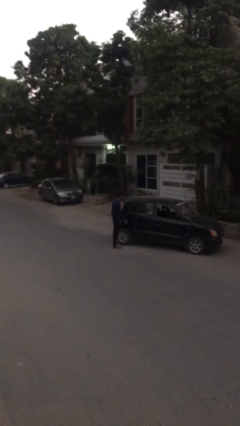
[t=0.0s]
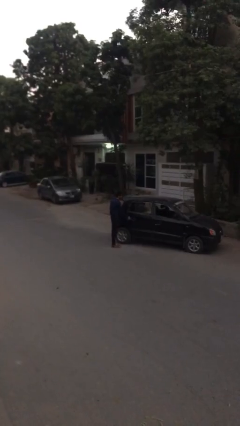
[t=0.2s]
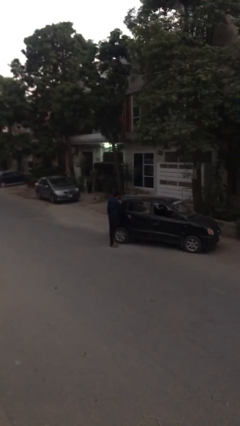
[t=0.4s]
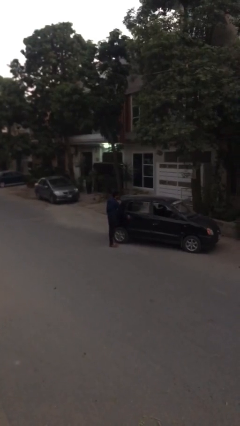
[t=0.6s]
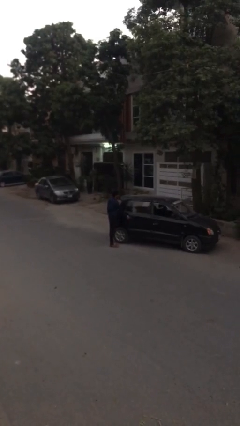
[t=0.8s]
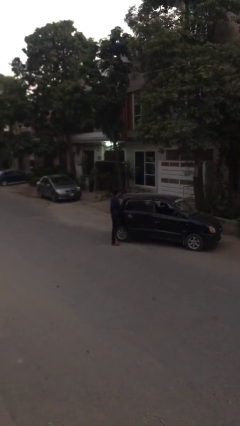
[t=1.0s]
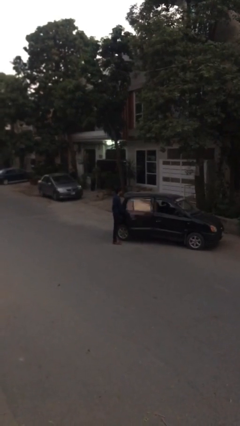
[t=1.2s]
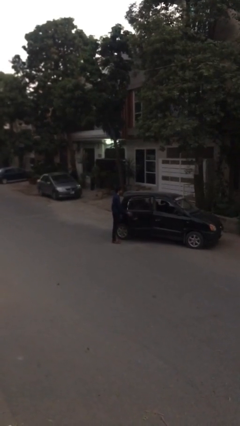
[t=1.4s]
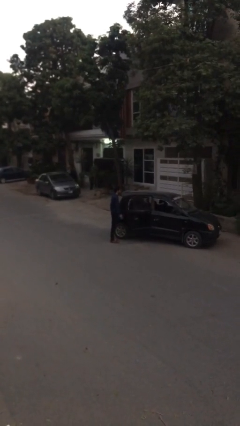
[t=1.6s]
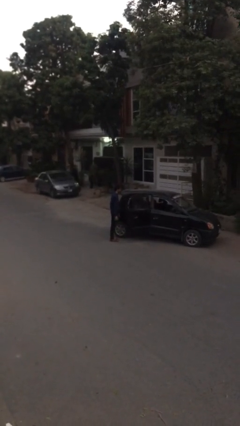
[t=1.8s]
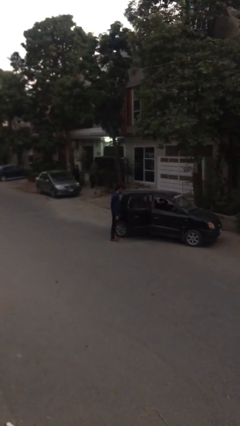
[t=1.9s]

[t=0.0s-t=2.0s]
person opens car door

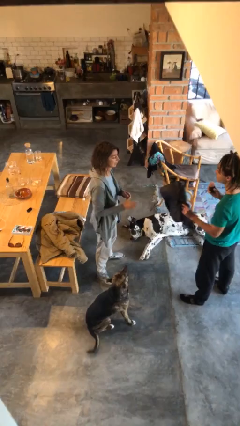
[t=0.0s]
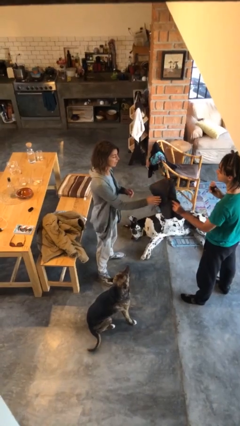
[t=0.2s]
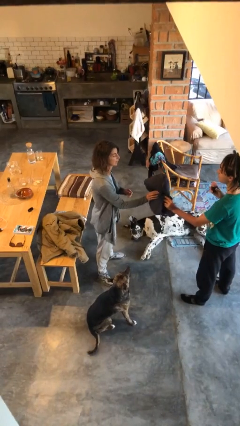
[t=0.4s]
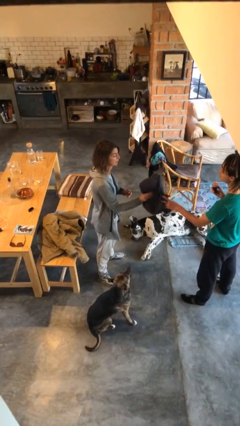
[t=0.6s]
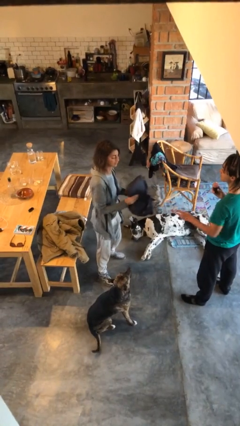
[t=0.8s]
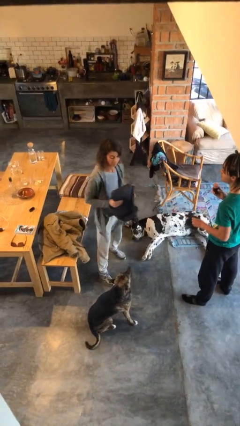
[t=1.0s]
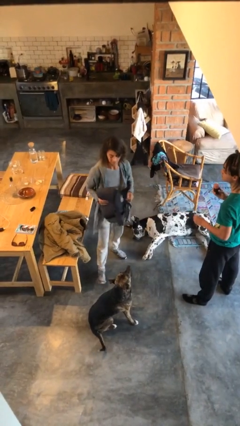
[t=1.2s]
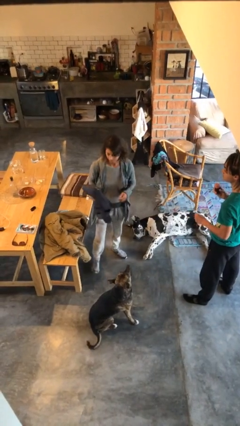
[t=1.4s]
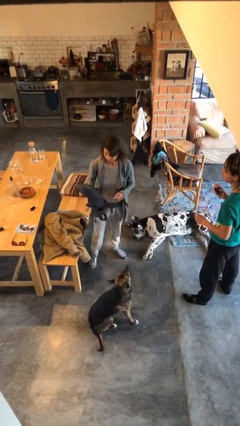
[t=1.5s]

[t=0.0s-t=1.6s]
person transfers object to person

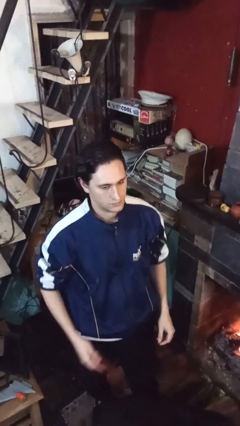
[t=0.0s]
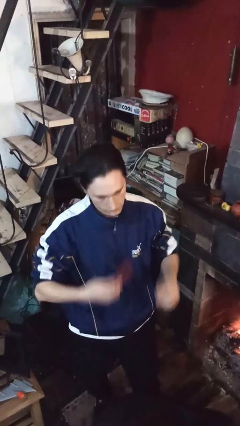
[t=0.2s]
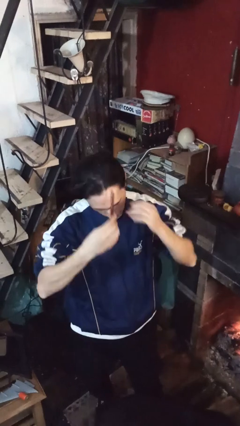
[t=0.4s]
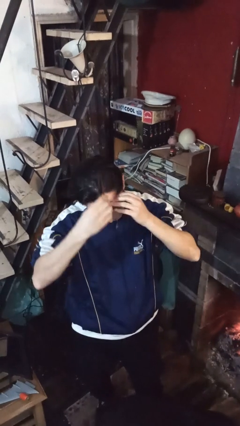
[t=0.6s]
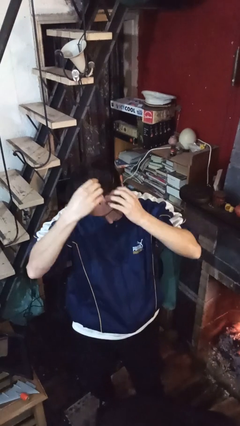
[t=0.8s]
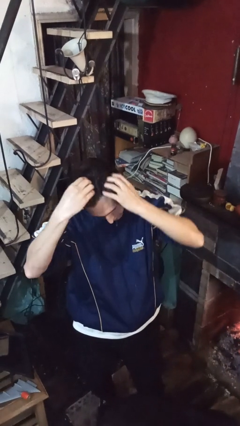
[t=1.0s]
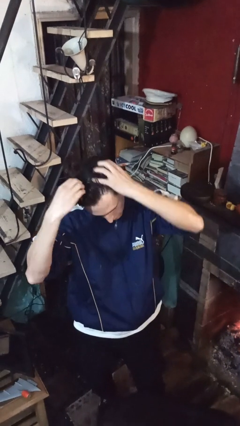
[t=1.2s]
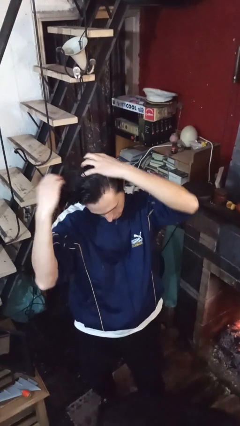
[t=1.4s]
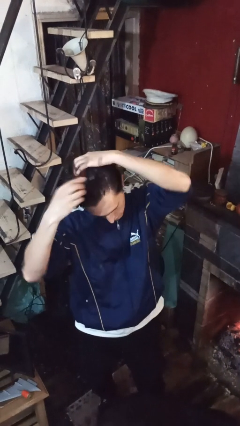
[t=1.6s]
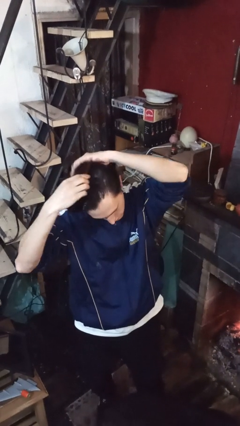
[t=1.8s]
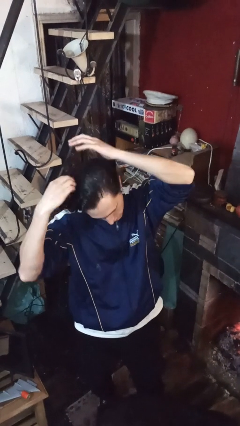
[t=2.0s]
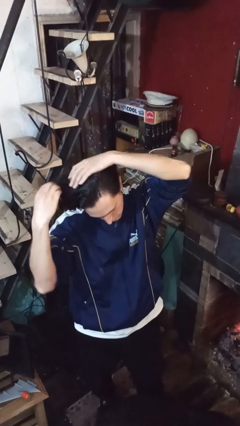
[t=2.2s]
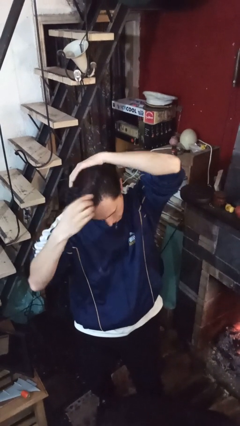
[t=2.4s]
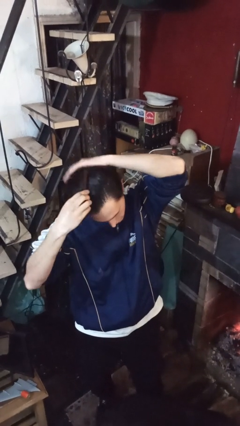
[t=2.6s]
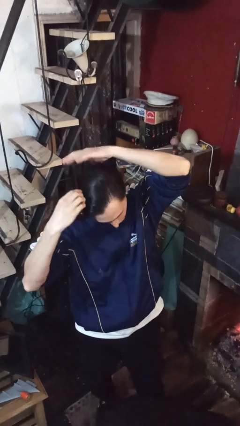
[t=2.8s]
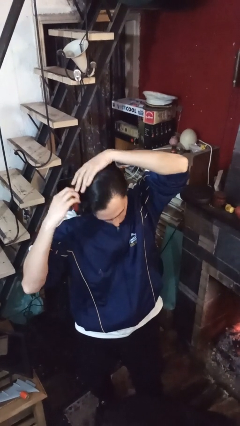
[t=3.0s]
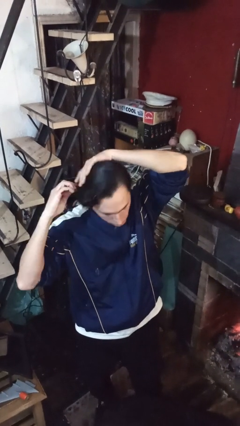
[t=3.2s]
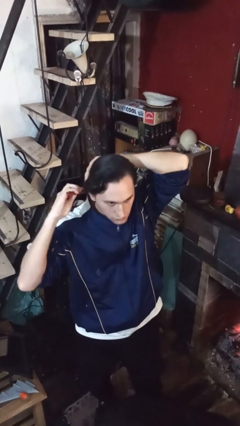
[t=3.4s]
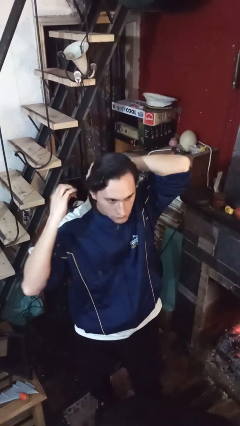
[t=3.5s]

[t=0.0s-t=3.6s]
person brushes hair

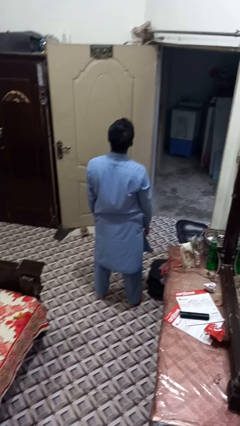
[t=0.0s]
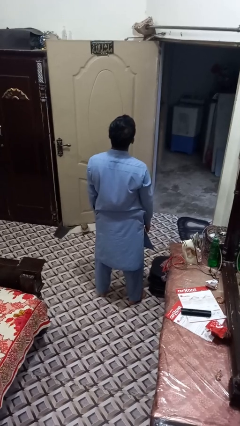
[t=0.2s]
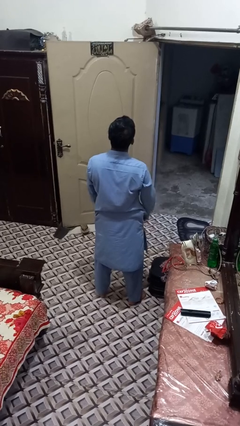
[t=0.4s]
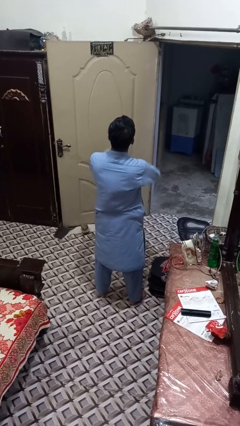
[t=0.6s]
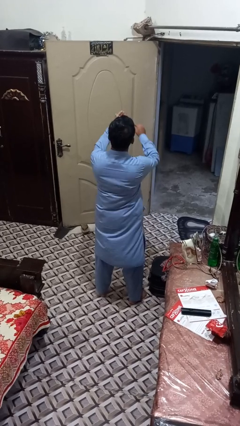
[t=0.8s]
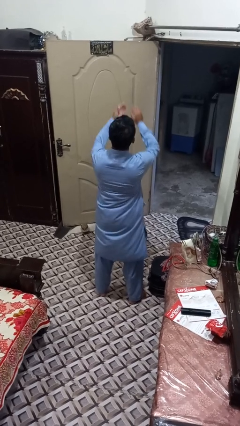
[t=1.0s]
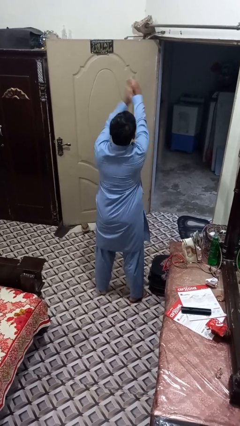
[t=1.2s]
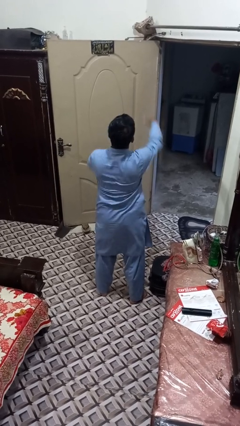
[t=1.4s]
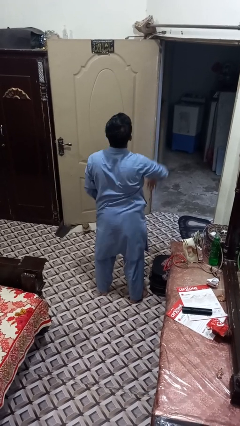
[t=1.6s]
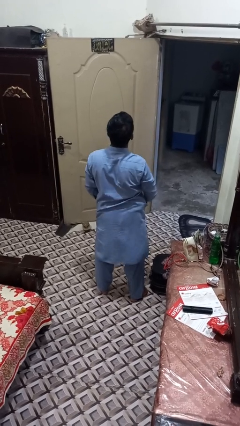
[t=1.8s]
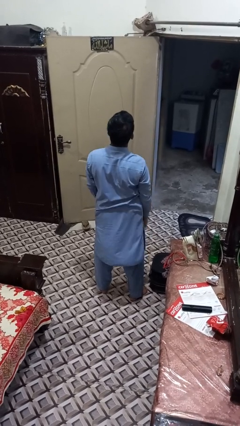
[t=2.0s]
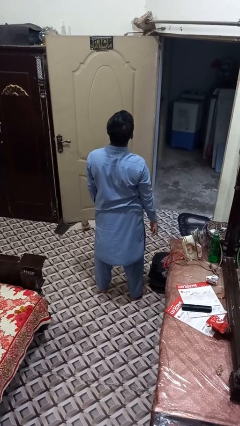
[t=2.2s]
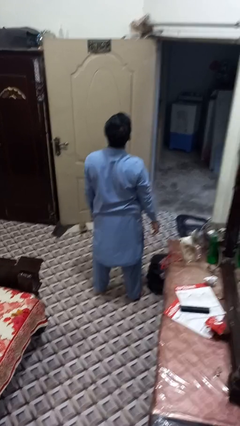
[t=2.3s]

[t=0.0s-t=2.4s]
person swats bug

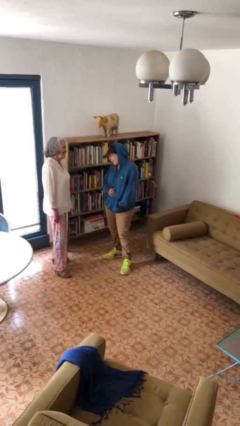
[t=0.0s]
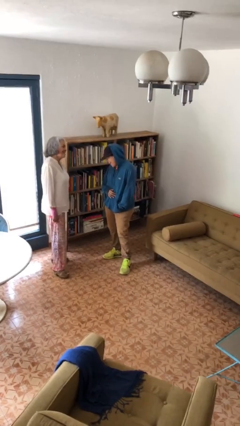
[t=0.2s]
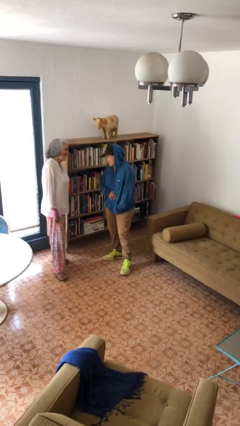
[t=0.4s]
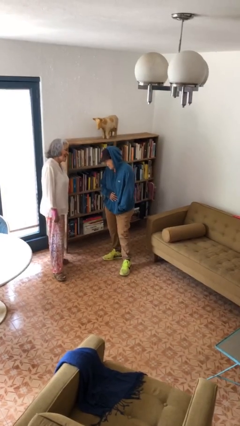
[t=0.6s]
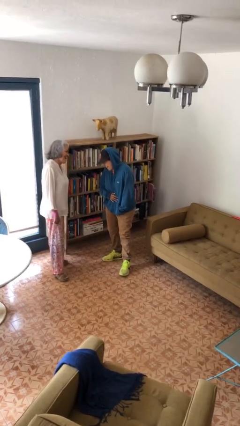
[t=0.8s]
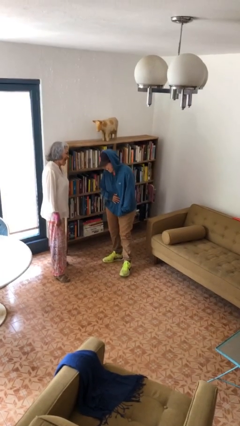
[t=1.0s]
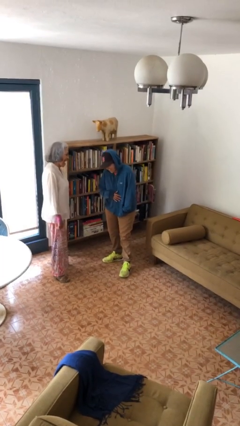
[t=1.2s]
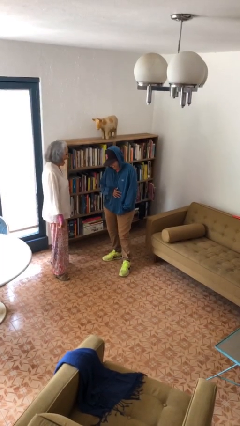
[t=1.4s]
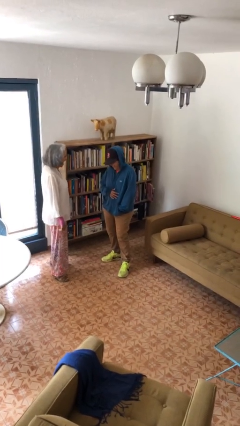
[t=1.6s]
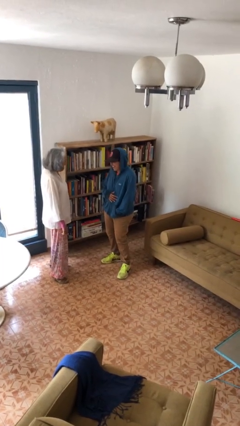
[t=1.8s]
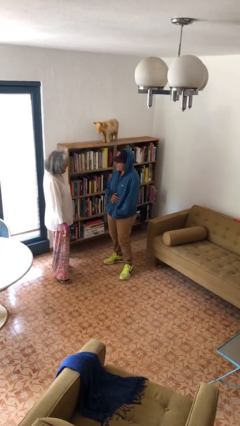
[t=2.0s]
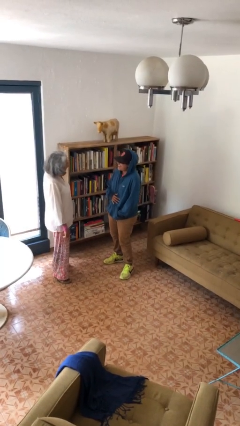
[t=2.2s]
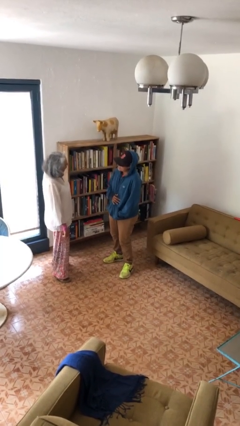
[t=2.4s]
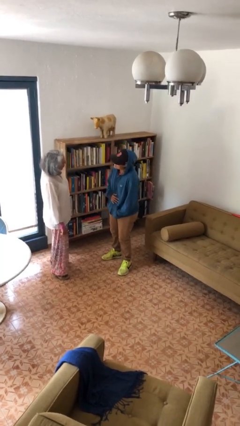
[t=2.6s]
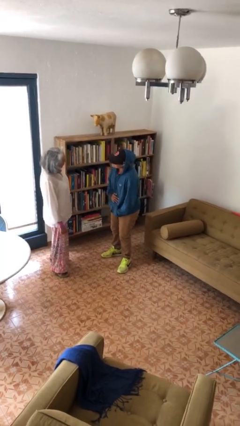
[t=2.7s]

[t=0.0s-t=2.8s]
person laughs with person

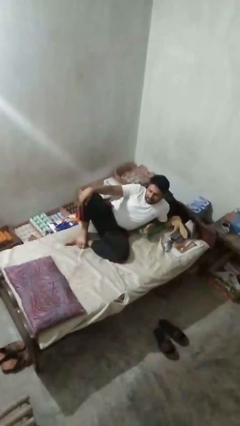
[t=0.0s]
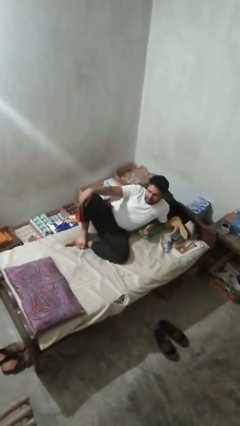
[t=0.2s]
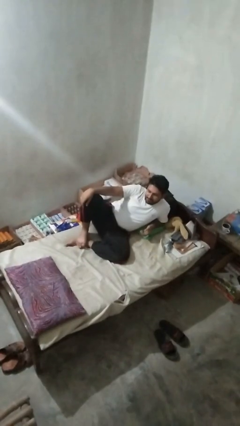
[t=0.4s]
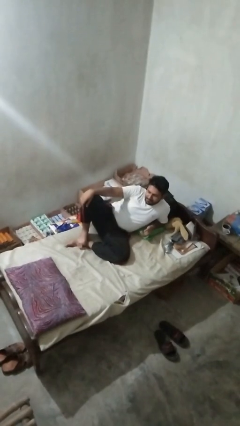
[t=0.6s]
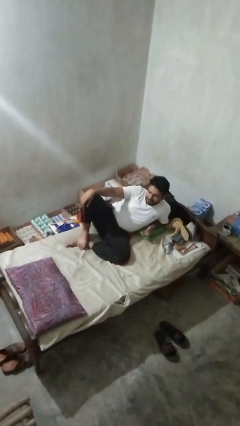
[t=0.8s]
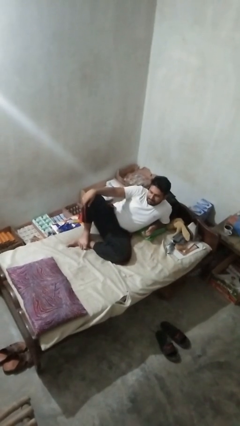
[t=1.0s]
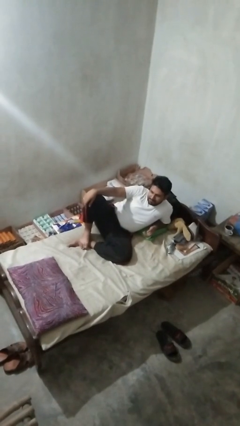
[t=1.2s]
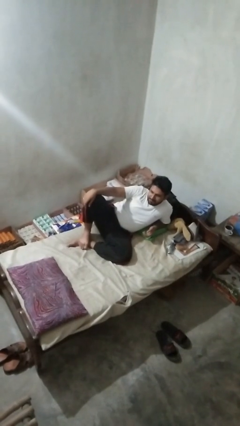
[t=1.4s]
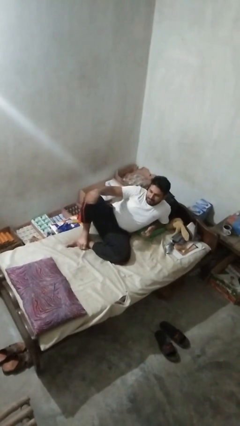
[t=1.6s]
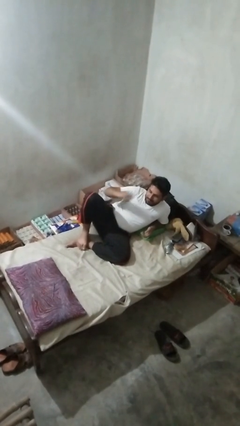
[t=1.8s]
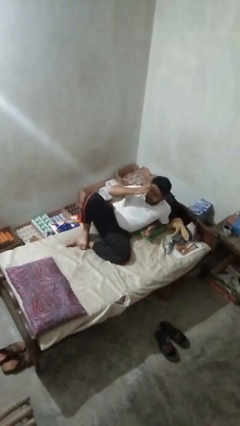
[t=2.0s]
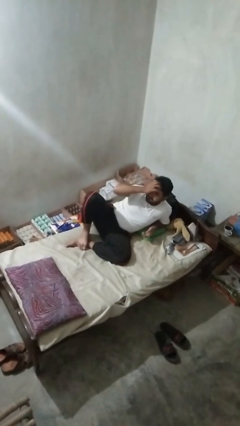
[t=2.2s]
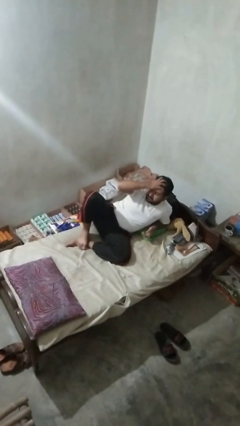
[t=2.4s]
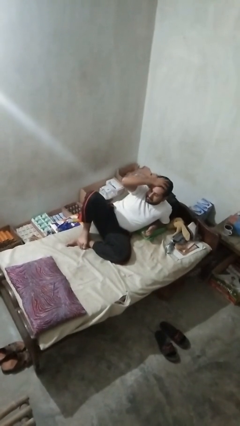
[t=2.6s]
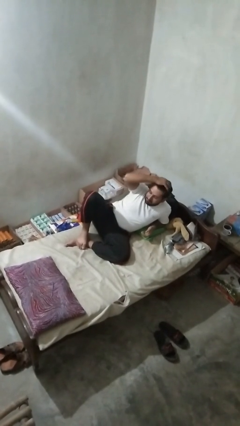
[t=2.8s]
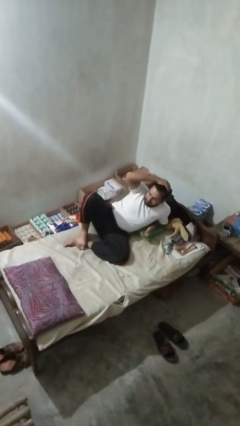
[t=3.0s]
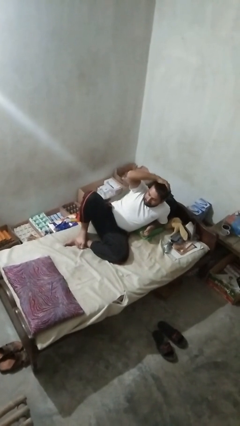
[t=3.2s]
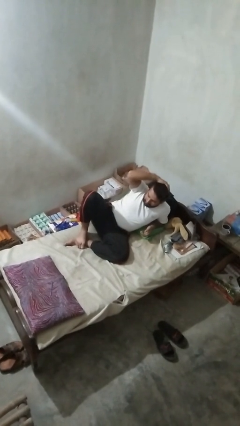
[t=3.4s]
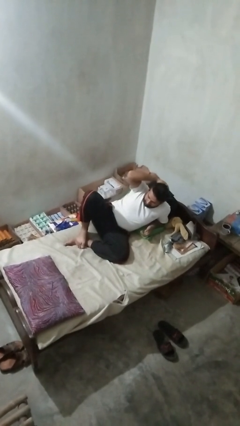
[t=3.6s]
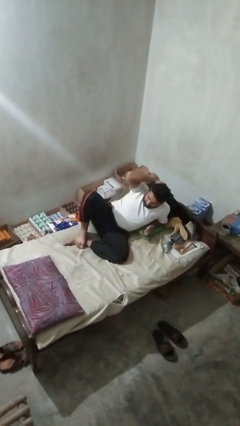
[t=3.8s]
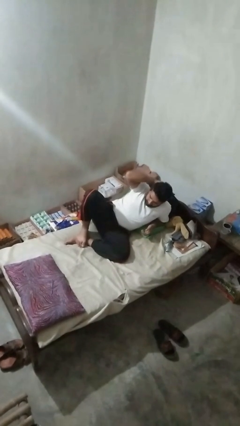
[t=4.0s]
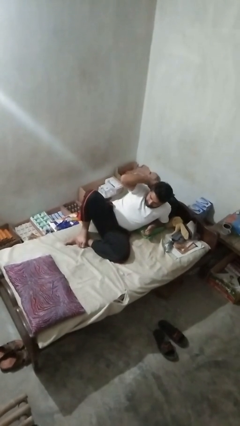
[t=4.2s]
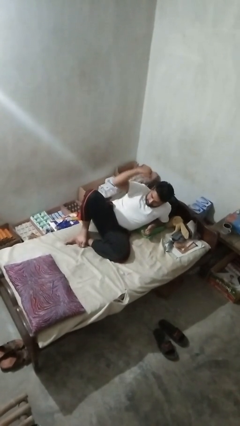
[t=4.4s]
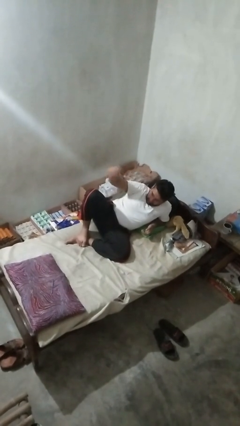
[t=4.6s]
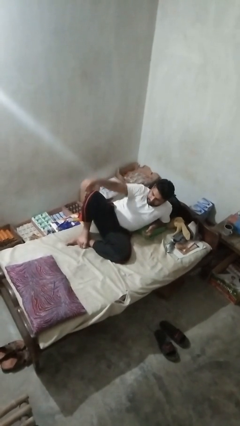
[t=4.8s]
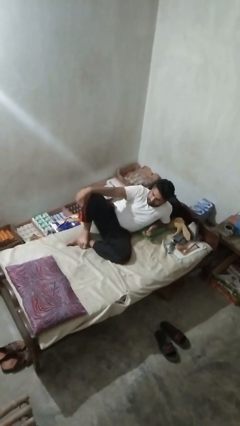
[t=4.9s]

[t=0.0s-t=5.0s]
person strokes hair
